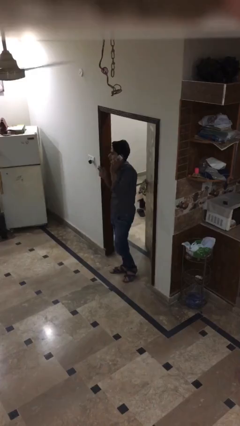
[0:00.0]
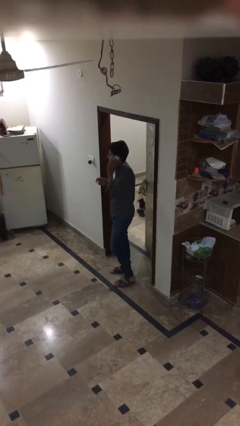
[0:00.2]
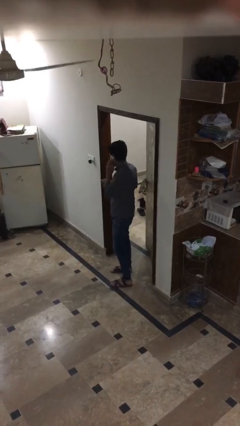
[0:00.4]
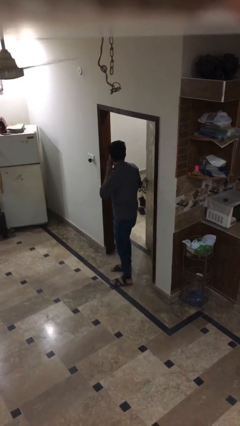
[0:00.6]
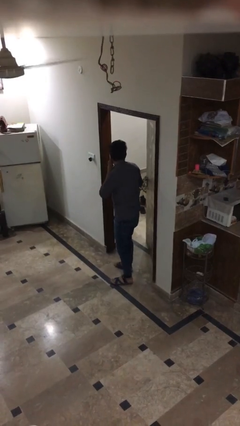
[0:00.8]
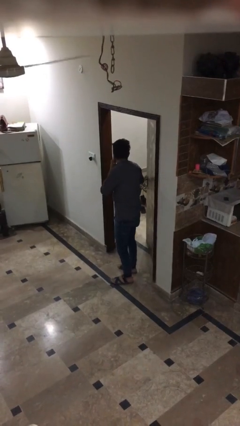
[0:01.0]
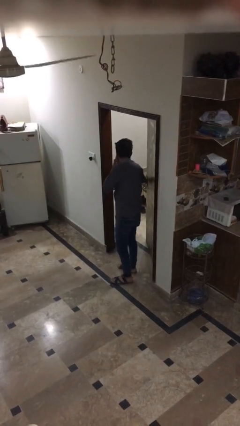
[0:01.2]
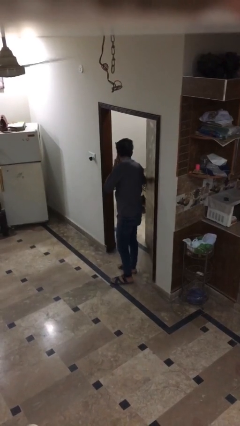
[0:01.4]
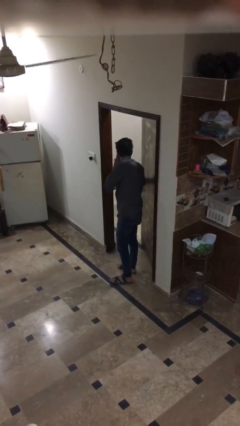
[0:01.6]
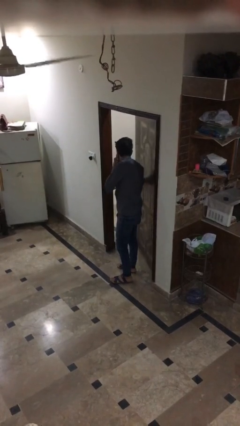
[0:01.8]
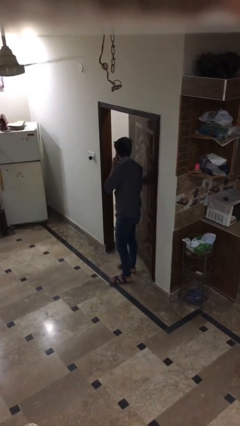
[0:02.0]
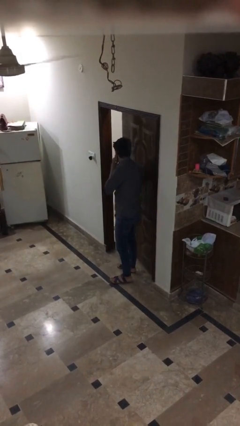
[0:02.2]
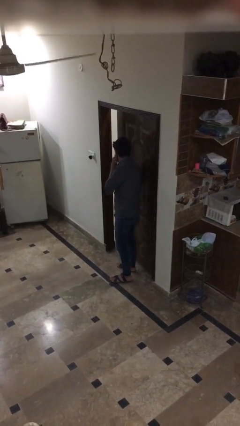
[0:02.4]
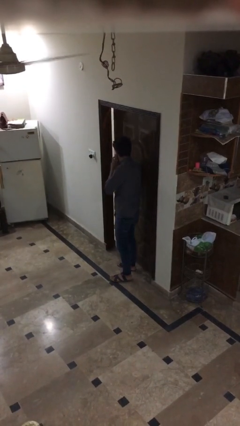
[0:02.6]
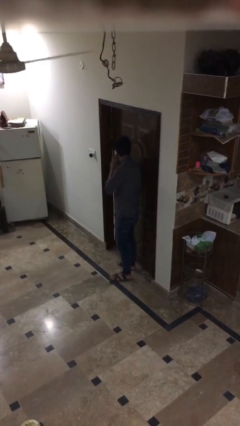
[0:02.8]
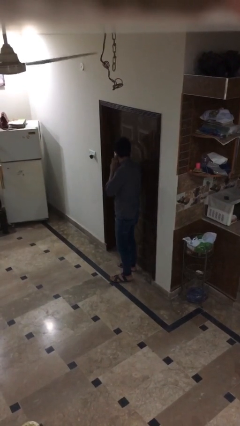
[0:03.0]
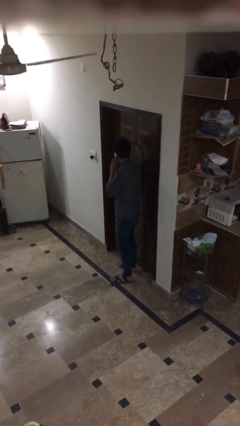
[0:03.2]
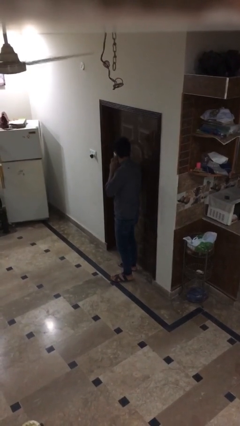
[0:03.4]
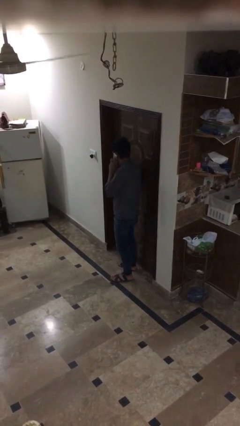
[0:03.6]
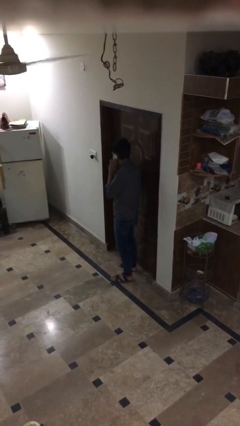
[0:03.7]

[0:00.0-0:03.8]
person closes facility door

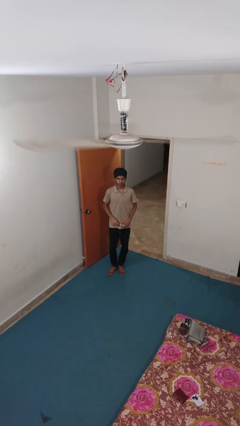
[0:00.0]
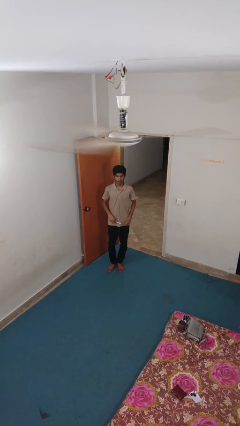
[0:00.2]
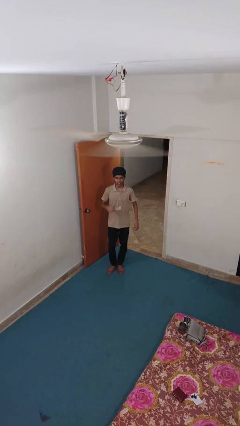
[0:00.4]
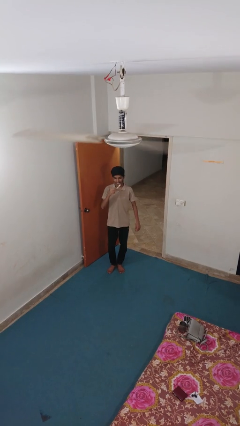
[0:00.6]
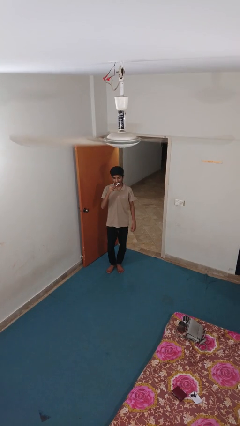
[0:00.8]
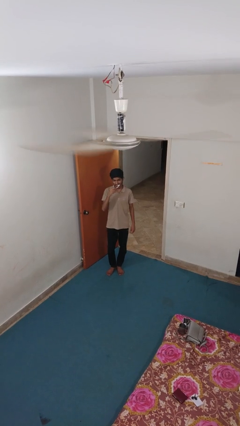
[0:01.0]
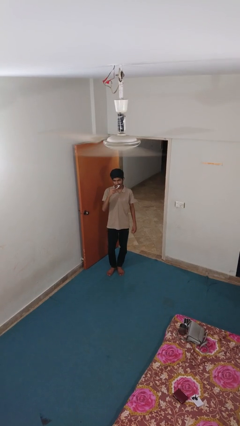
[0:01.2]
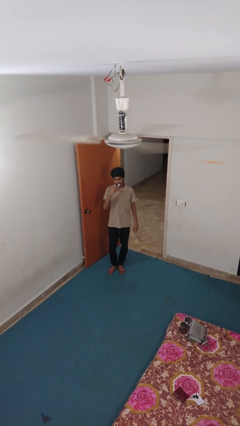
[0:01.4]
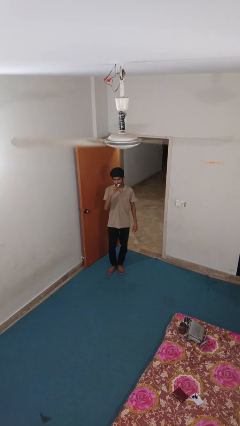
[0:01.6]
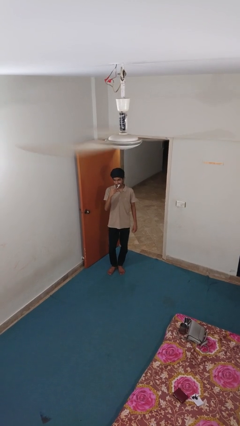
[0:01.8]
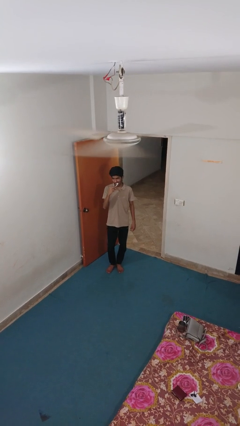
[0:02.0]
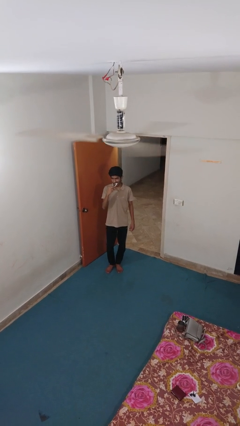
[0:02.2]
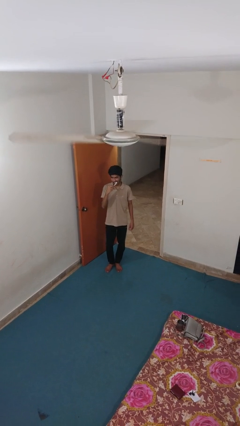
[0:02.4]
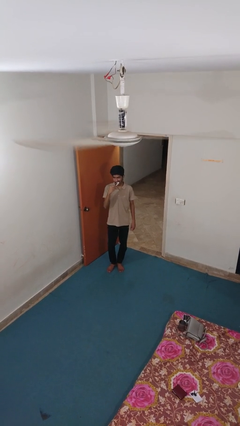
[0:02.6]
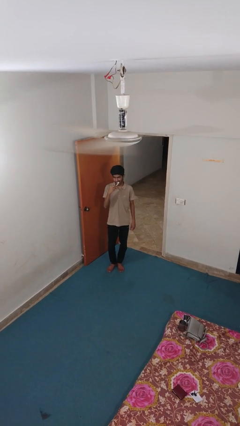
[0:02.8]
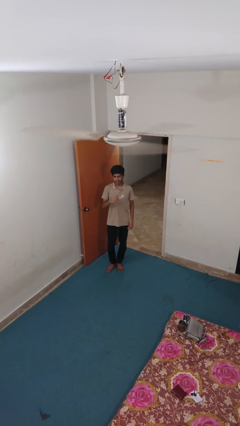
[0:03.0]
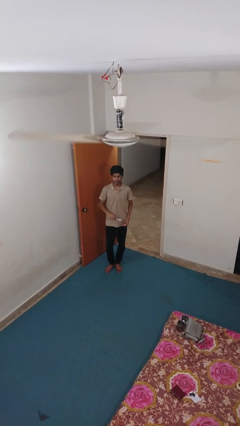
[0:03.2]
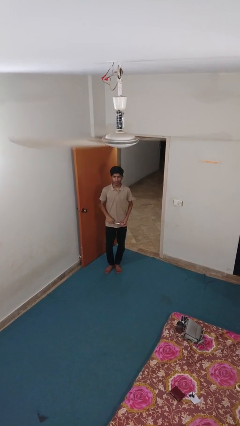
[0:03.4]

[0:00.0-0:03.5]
person brushes teeth

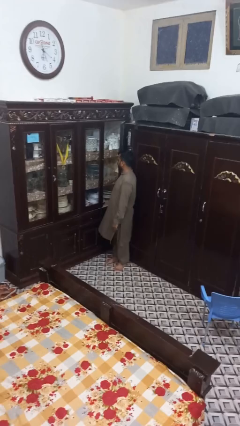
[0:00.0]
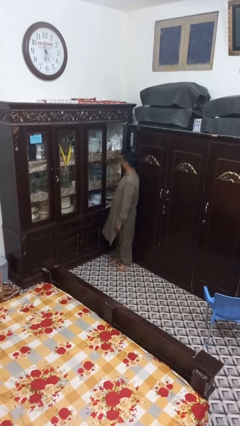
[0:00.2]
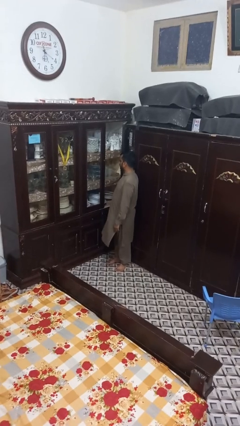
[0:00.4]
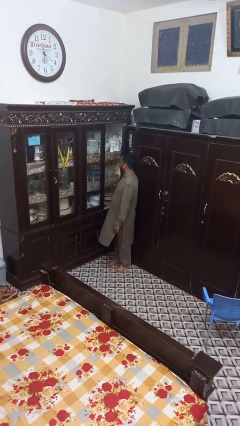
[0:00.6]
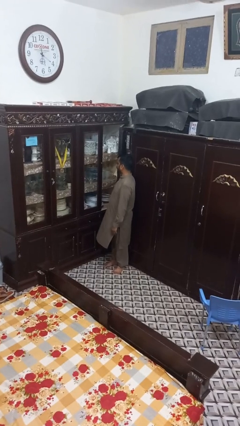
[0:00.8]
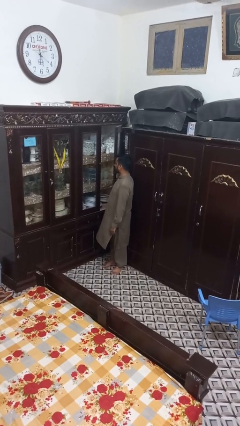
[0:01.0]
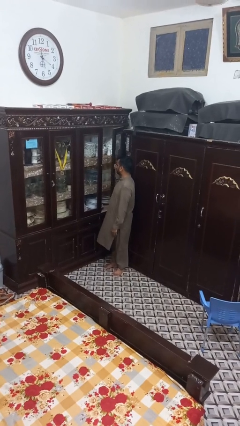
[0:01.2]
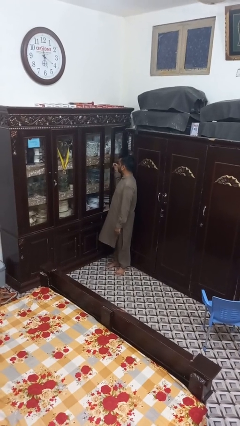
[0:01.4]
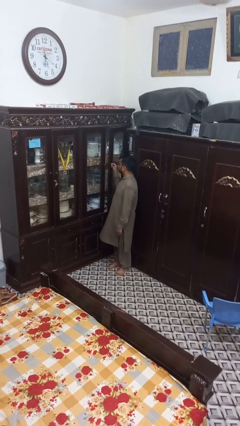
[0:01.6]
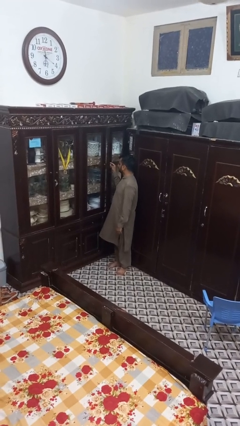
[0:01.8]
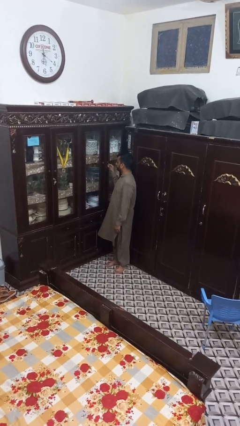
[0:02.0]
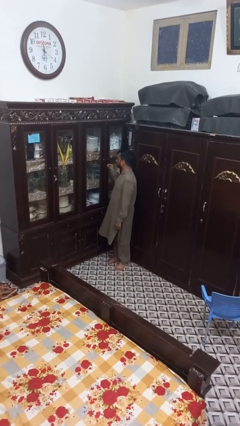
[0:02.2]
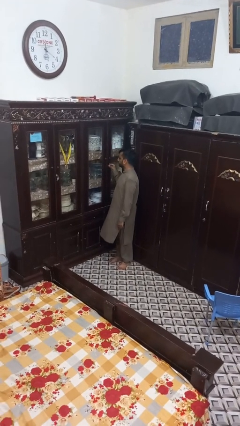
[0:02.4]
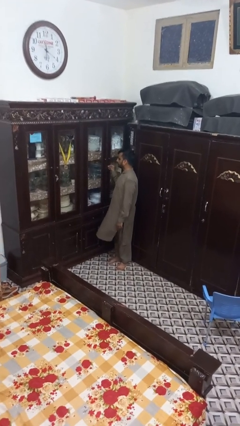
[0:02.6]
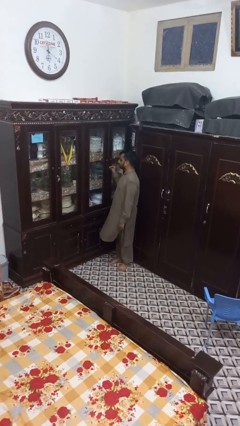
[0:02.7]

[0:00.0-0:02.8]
person closes cabinet

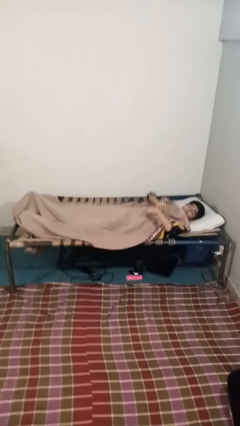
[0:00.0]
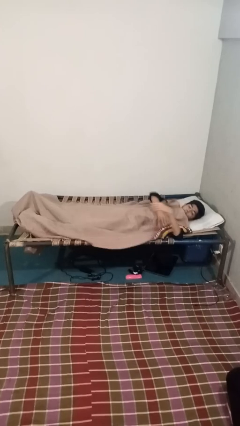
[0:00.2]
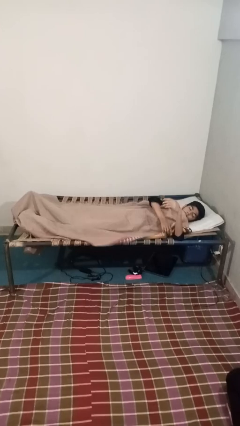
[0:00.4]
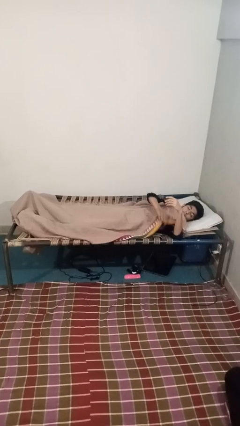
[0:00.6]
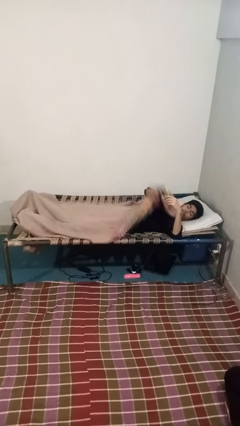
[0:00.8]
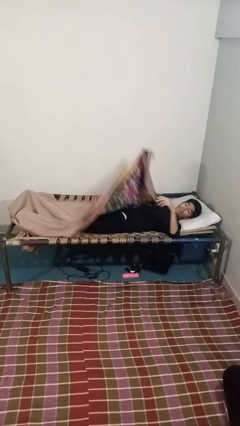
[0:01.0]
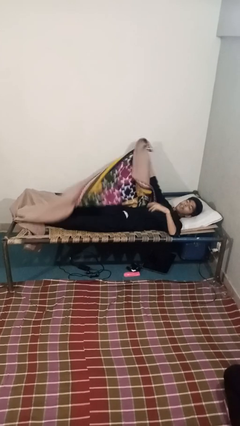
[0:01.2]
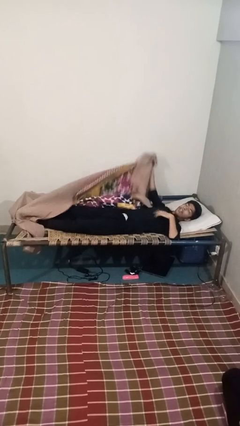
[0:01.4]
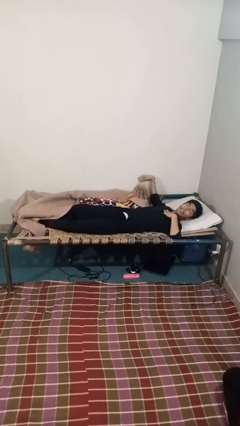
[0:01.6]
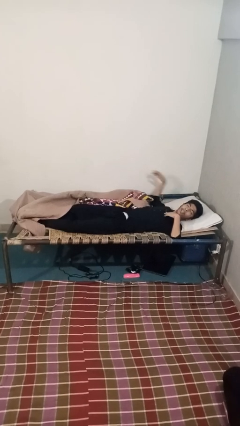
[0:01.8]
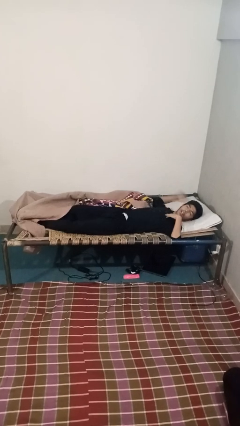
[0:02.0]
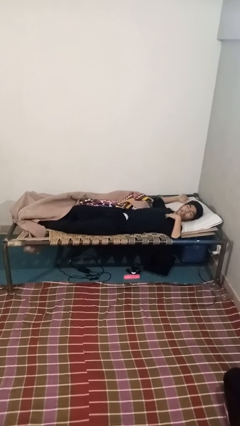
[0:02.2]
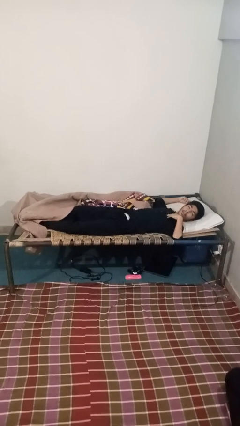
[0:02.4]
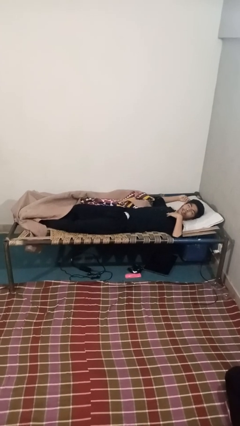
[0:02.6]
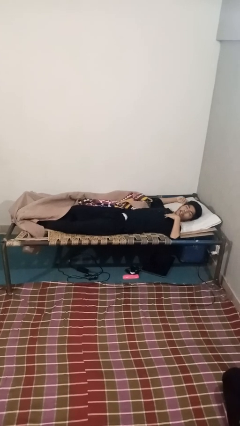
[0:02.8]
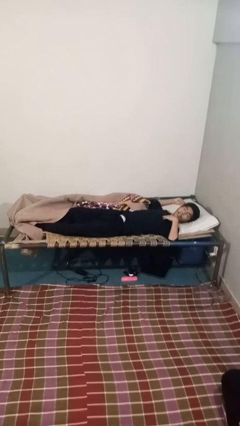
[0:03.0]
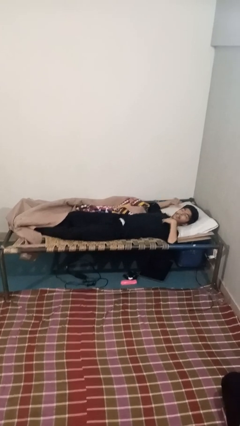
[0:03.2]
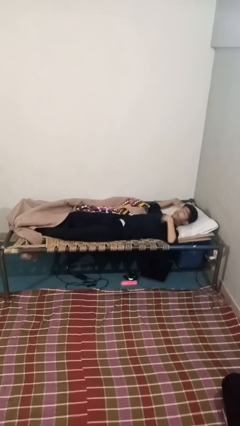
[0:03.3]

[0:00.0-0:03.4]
person uncovers with blanket

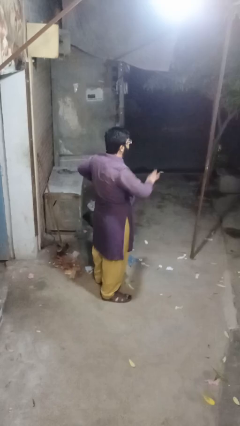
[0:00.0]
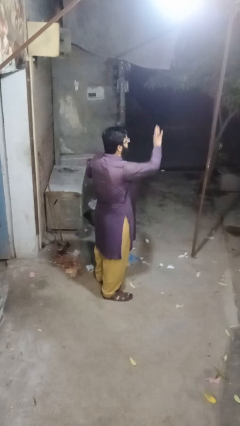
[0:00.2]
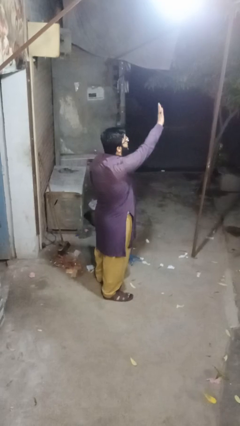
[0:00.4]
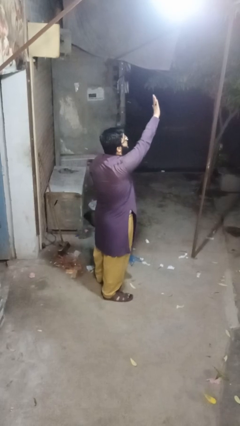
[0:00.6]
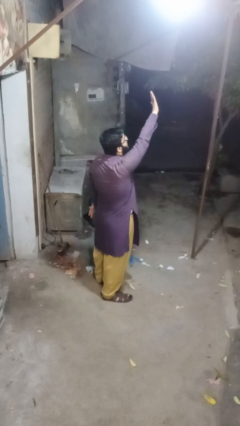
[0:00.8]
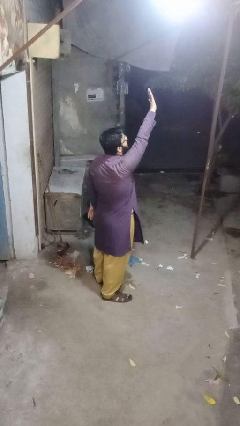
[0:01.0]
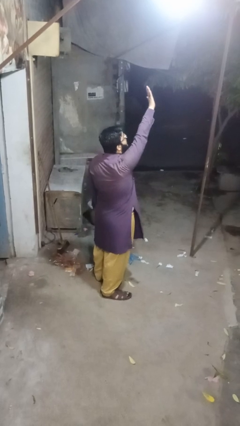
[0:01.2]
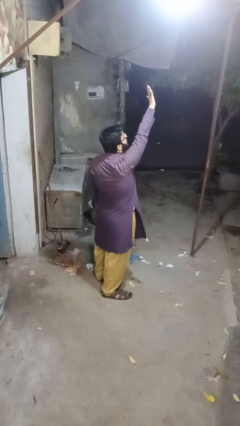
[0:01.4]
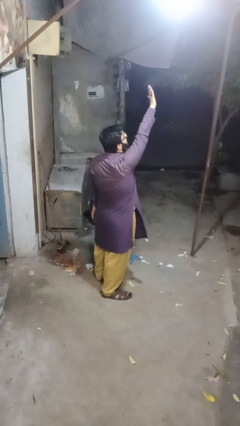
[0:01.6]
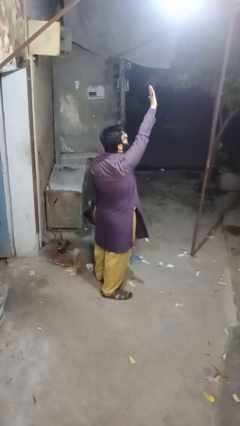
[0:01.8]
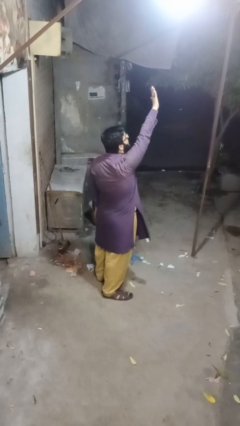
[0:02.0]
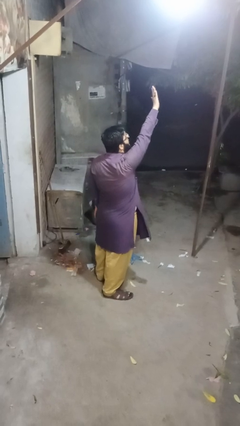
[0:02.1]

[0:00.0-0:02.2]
person gestures swipe up

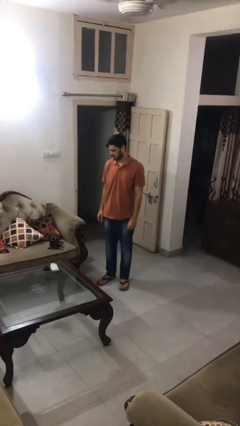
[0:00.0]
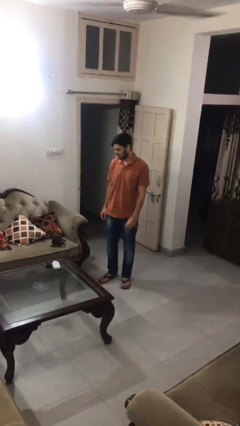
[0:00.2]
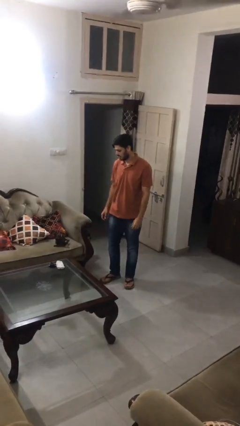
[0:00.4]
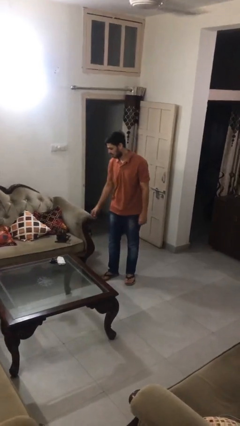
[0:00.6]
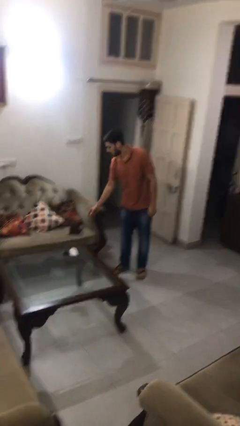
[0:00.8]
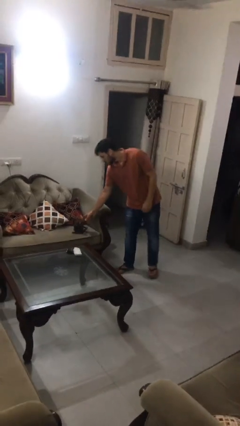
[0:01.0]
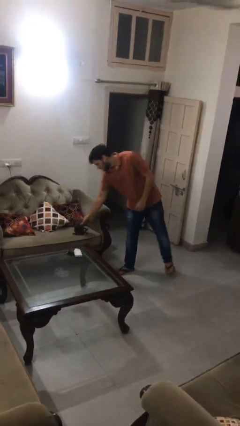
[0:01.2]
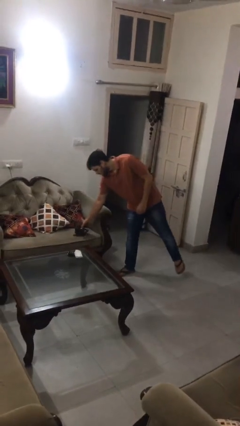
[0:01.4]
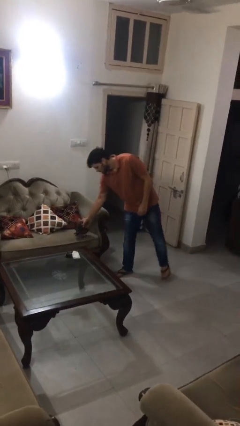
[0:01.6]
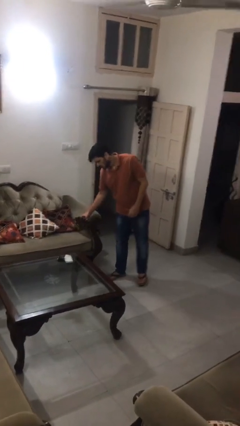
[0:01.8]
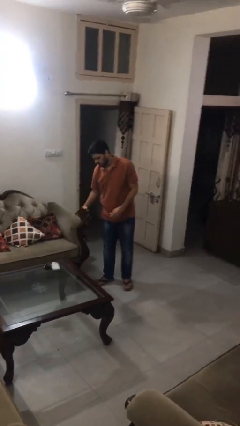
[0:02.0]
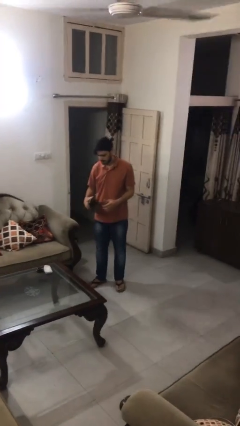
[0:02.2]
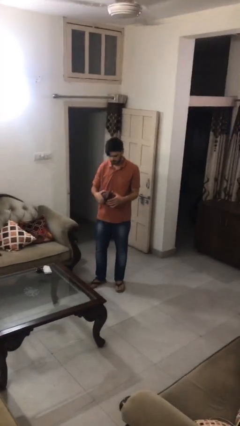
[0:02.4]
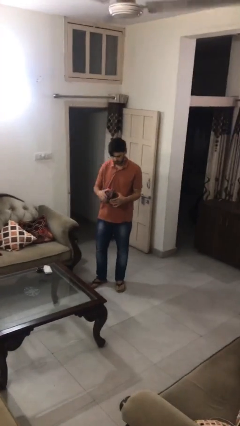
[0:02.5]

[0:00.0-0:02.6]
person picks up object from couch
